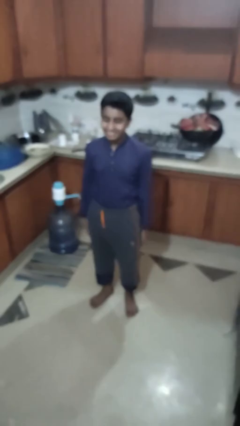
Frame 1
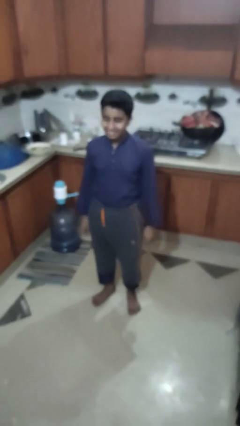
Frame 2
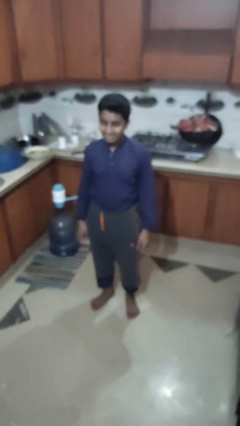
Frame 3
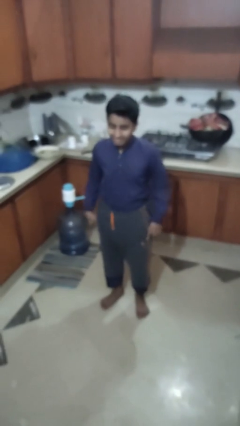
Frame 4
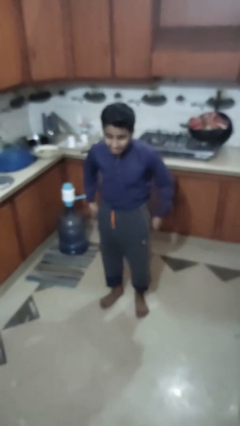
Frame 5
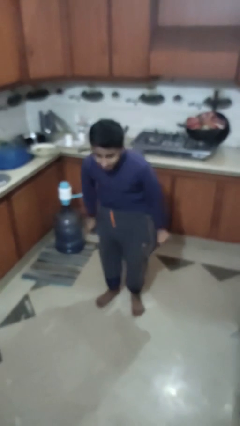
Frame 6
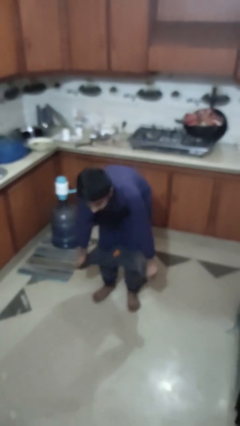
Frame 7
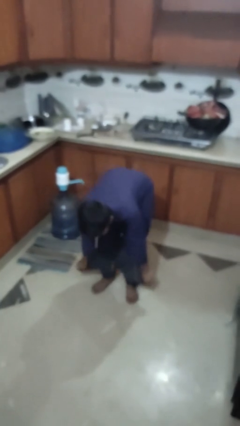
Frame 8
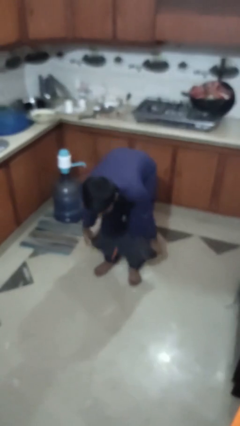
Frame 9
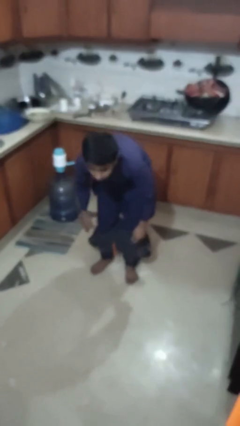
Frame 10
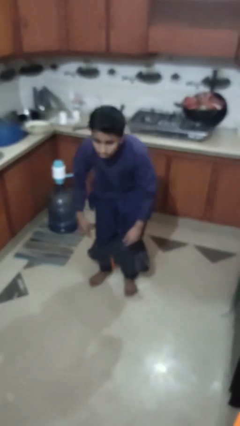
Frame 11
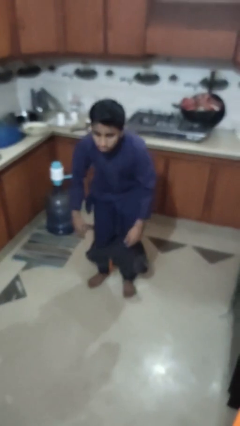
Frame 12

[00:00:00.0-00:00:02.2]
person takes off pants

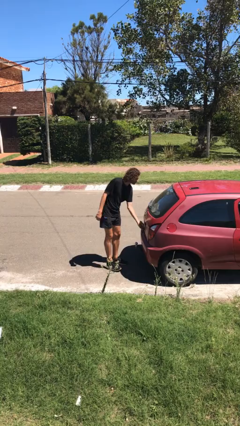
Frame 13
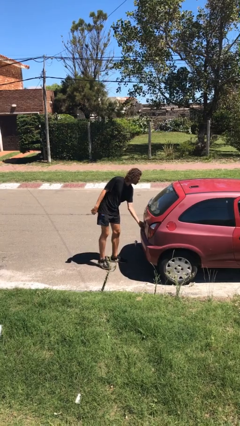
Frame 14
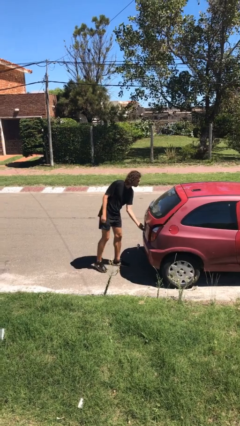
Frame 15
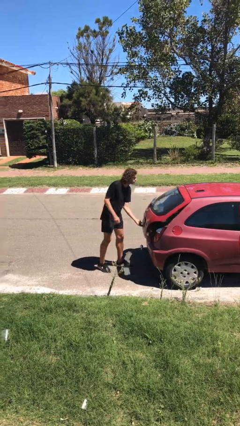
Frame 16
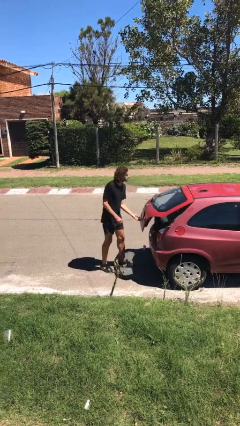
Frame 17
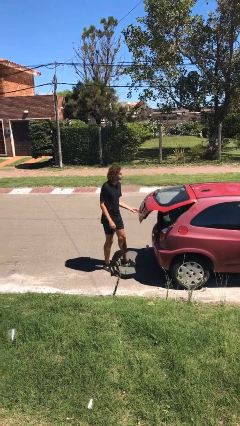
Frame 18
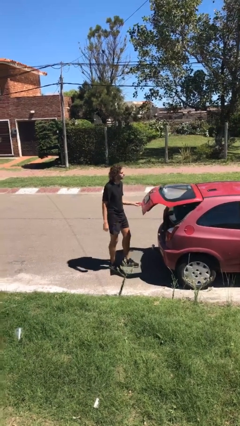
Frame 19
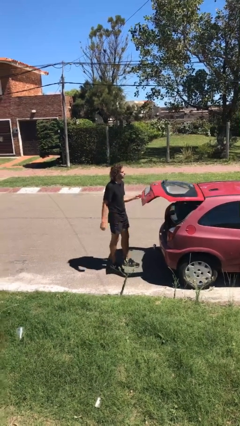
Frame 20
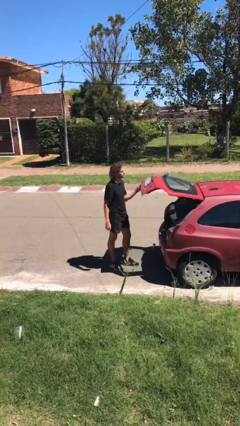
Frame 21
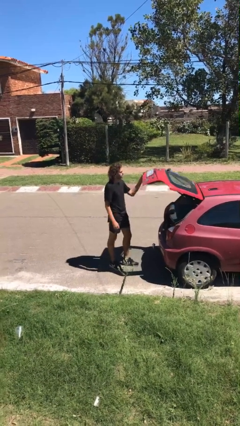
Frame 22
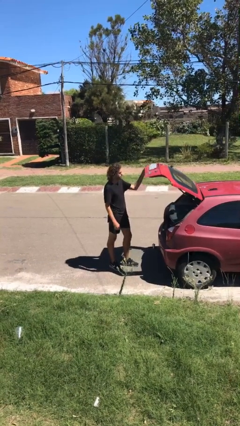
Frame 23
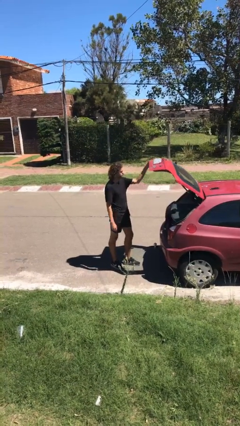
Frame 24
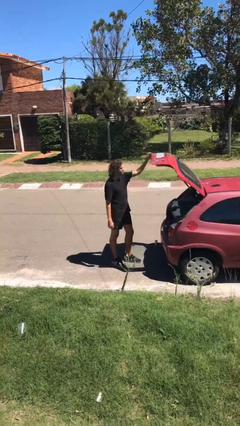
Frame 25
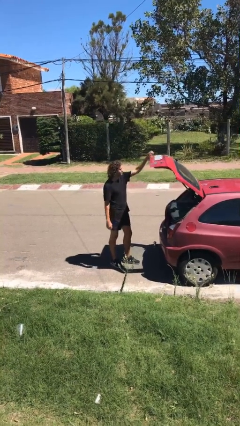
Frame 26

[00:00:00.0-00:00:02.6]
person opens car trunk

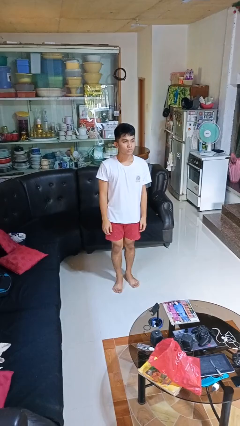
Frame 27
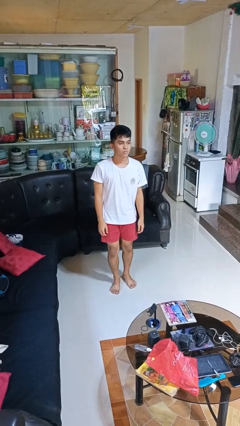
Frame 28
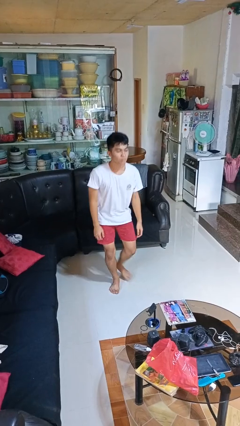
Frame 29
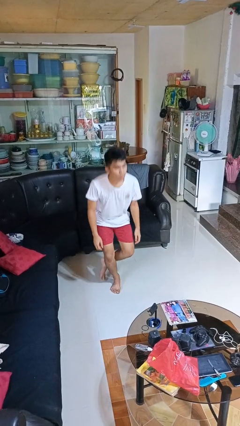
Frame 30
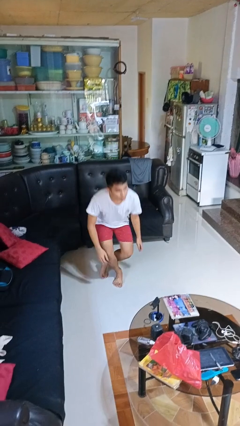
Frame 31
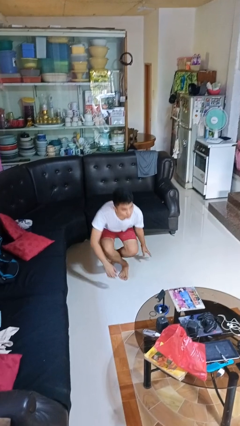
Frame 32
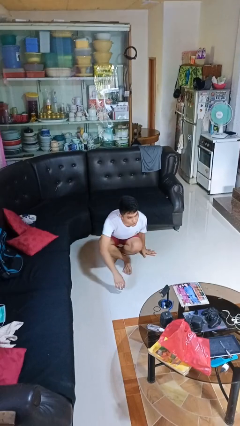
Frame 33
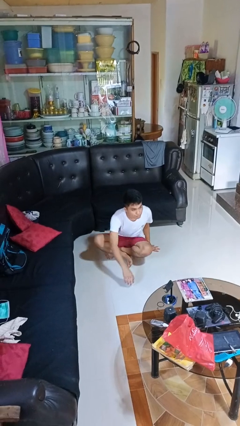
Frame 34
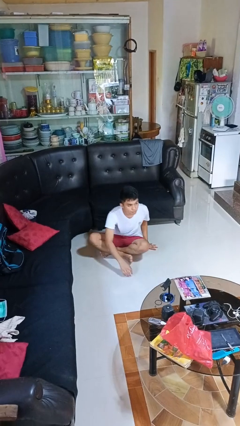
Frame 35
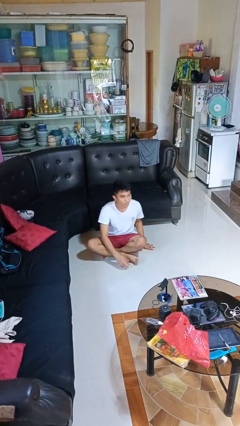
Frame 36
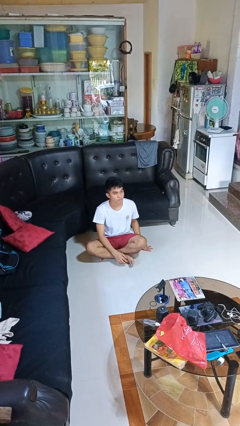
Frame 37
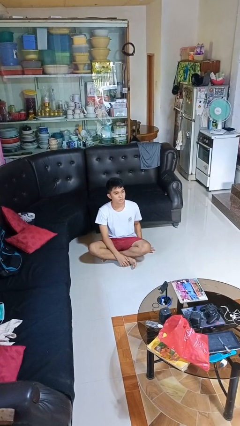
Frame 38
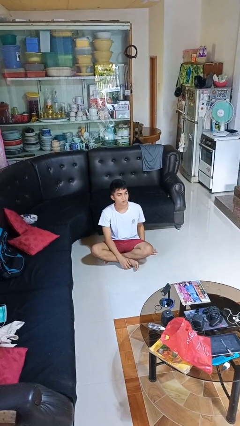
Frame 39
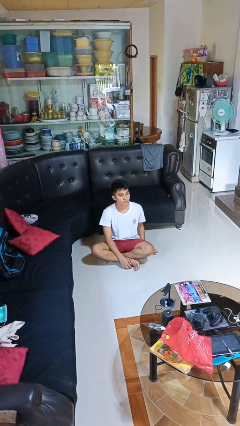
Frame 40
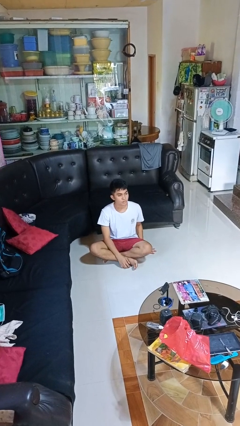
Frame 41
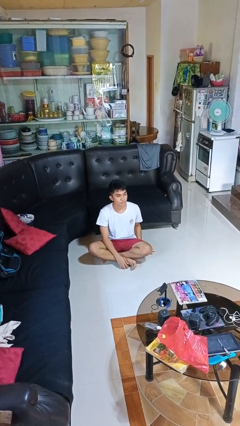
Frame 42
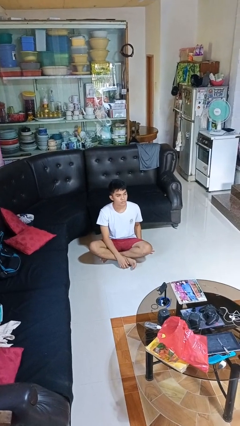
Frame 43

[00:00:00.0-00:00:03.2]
person sits crisscross

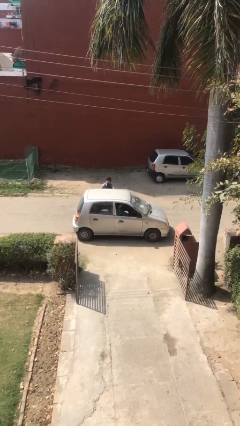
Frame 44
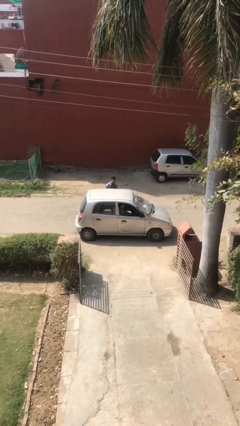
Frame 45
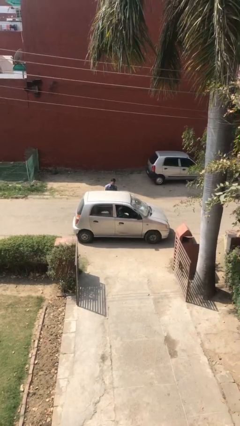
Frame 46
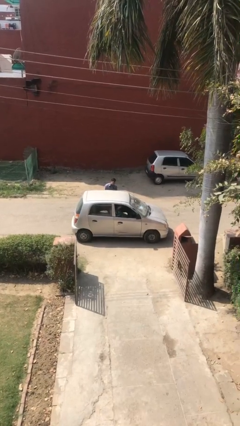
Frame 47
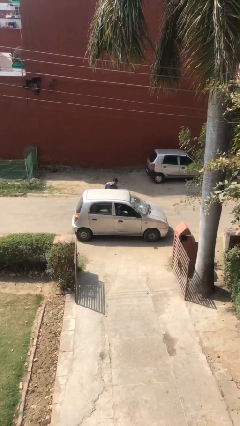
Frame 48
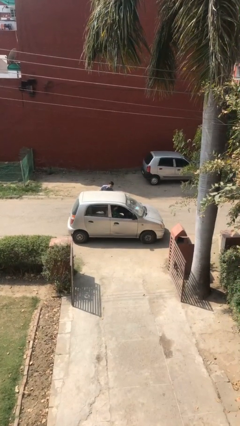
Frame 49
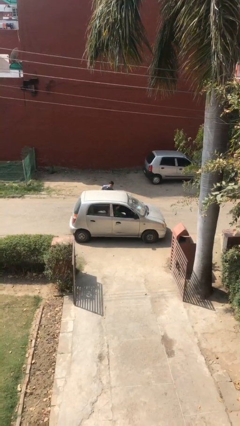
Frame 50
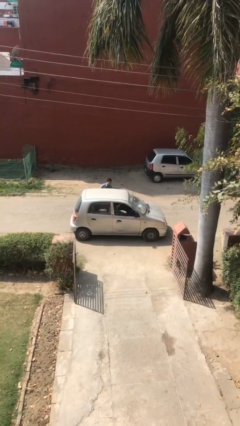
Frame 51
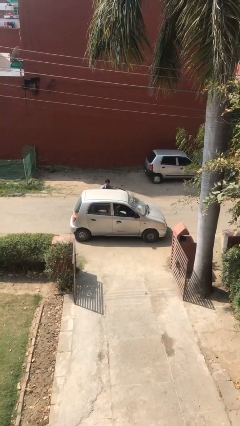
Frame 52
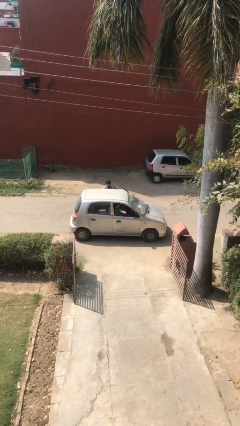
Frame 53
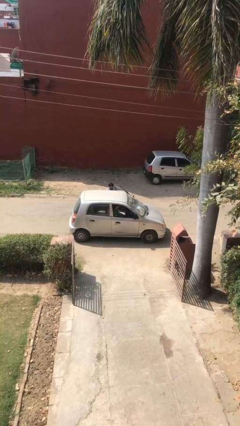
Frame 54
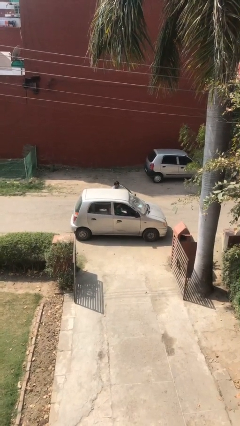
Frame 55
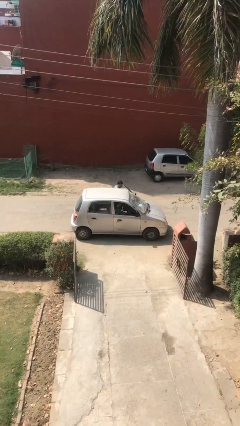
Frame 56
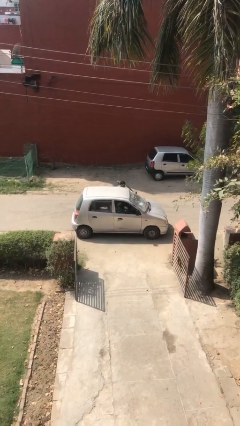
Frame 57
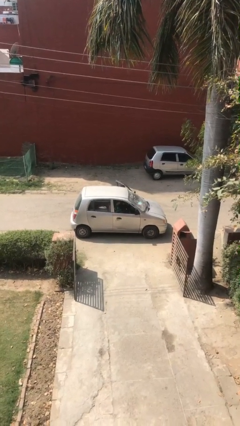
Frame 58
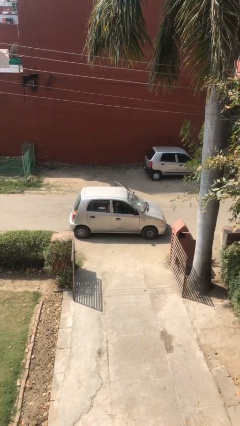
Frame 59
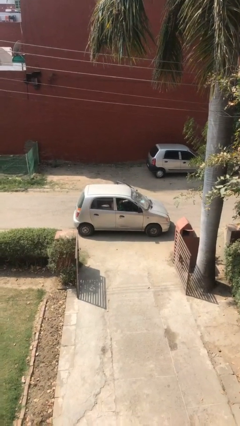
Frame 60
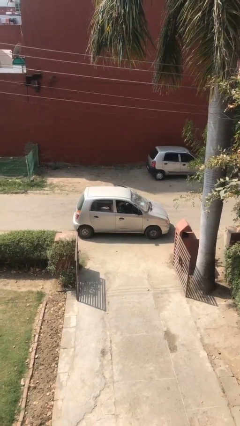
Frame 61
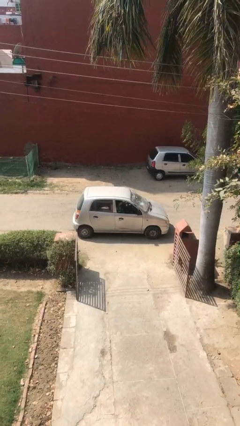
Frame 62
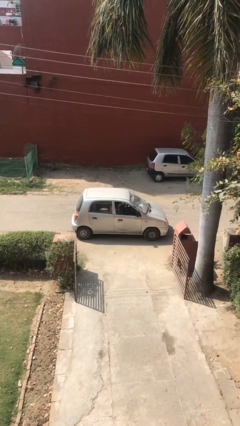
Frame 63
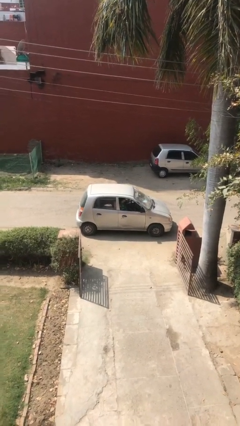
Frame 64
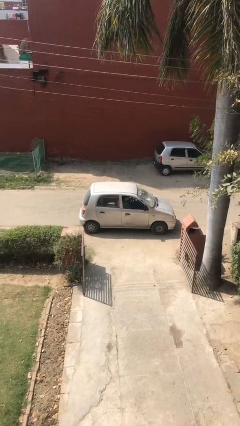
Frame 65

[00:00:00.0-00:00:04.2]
car picks up person

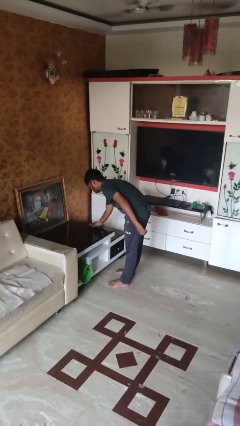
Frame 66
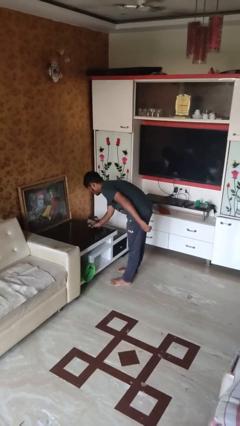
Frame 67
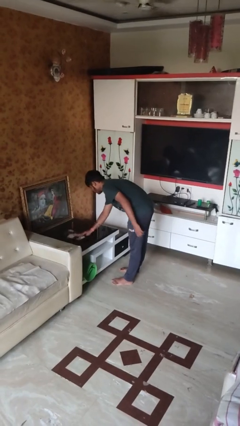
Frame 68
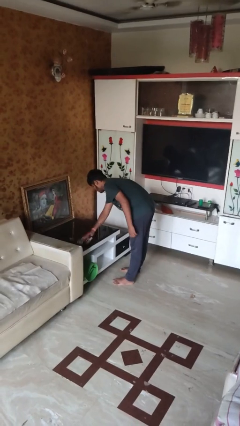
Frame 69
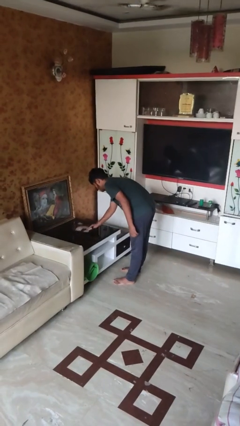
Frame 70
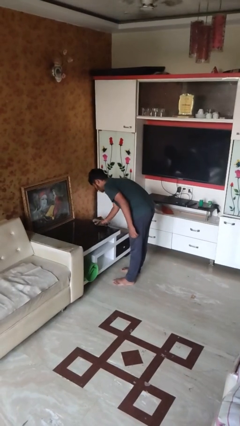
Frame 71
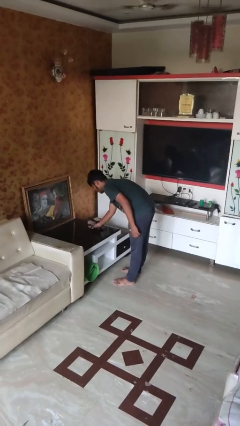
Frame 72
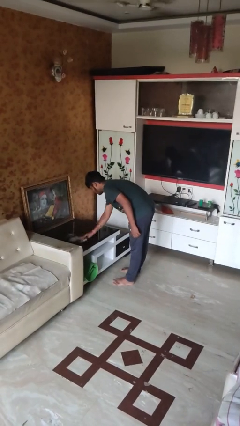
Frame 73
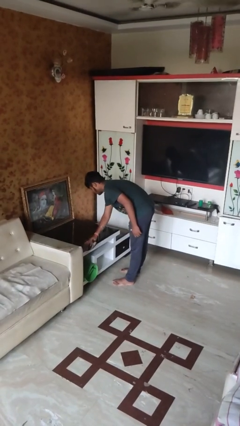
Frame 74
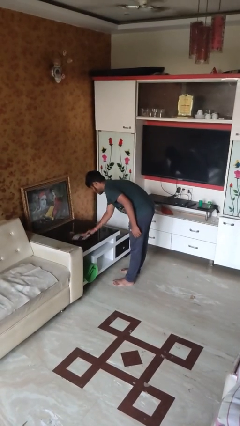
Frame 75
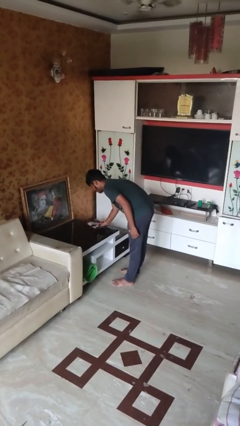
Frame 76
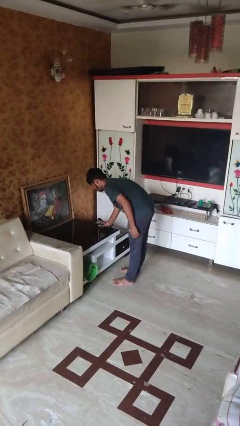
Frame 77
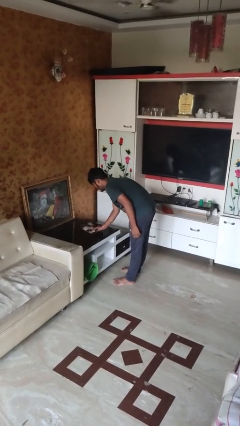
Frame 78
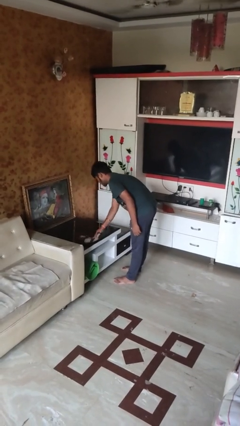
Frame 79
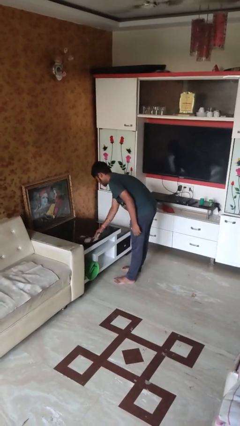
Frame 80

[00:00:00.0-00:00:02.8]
person cleans table with rag

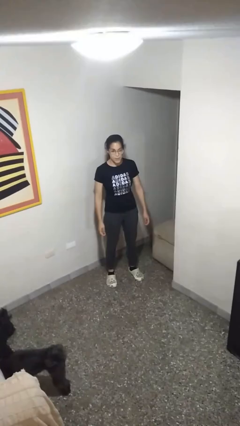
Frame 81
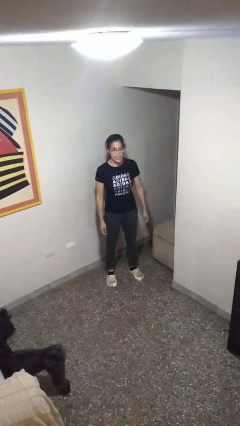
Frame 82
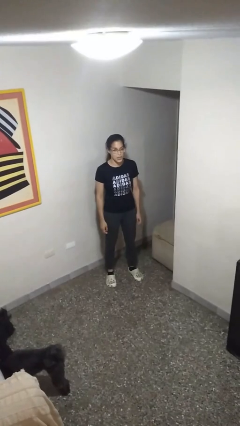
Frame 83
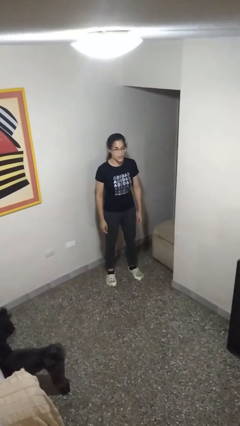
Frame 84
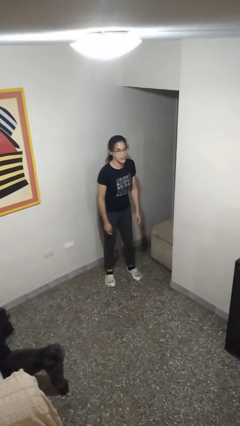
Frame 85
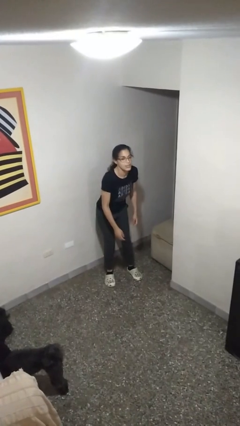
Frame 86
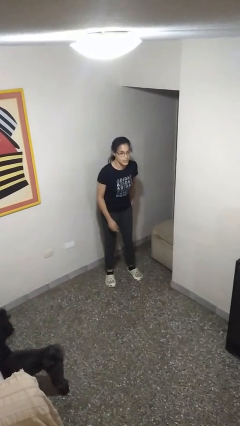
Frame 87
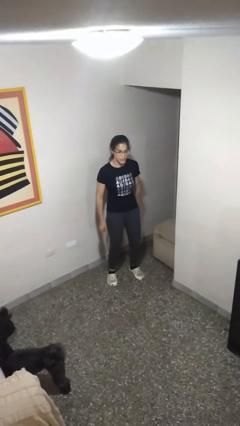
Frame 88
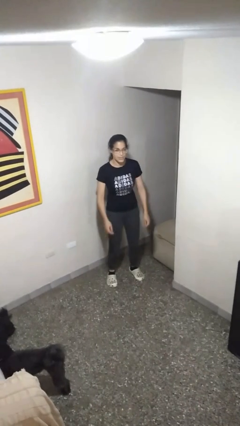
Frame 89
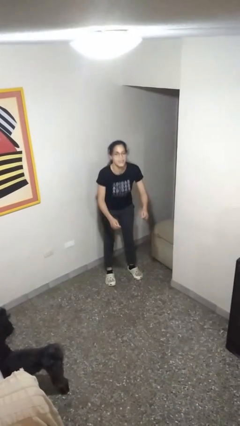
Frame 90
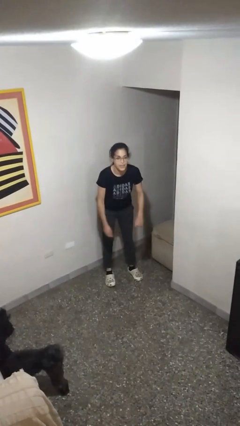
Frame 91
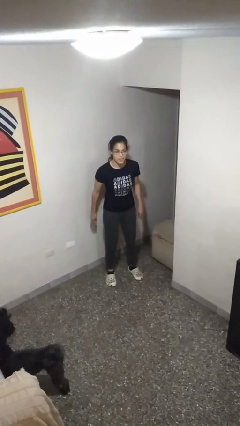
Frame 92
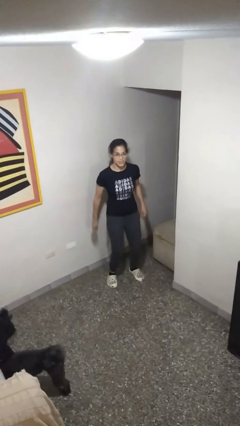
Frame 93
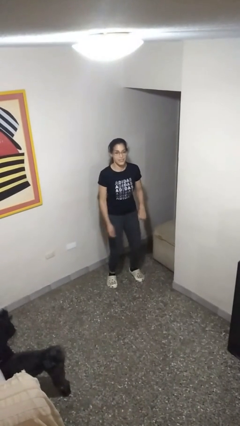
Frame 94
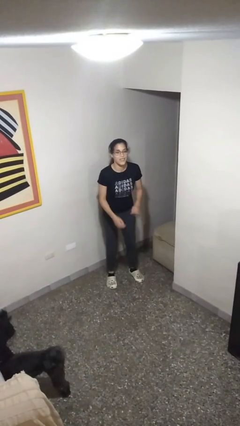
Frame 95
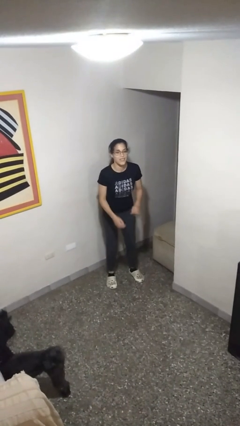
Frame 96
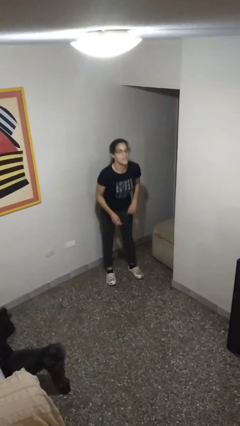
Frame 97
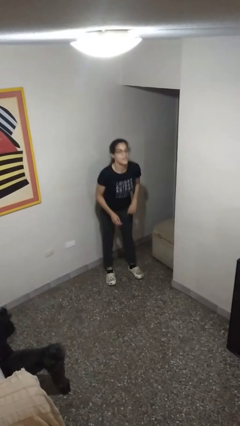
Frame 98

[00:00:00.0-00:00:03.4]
person wiggles hips
